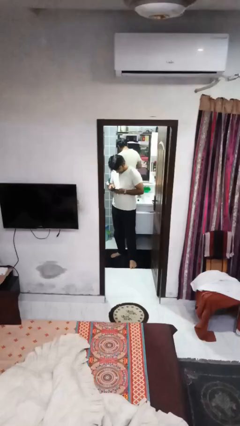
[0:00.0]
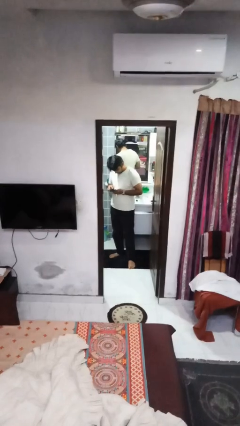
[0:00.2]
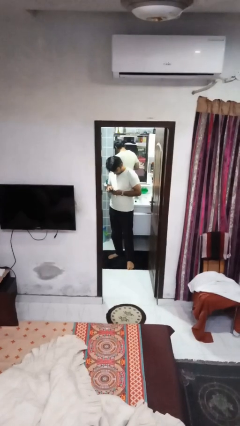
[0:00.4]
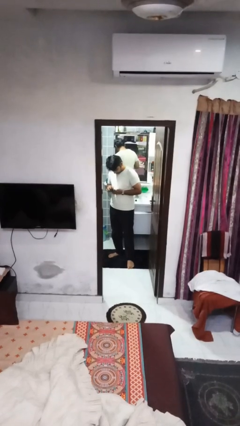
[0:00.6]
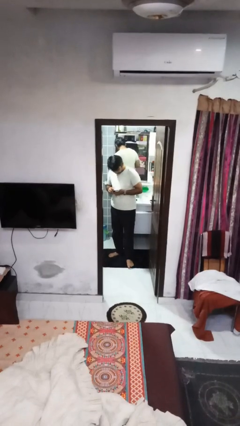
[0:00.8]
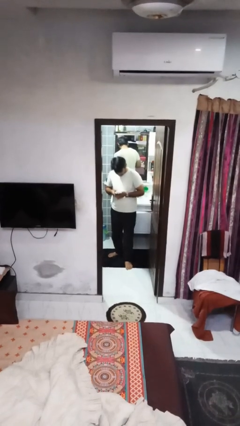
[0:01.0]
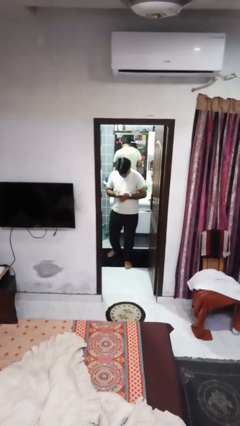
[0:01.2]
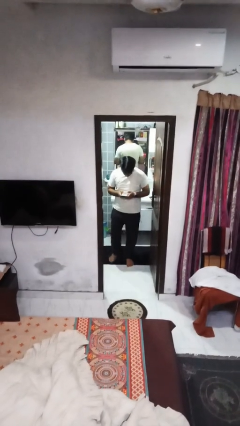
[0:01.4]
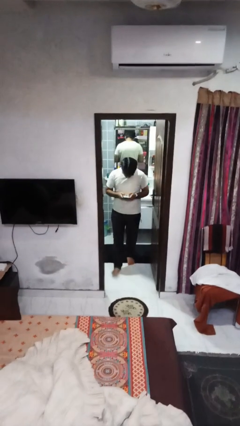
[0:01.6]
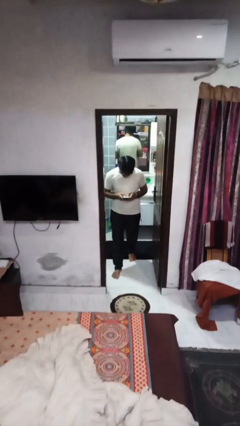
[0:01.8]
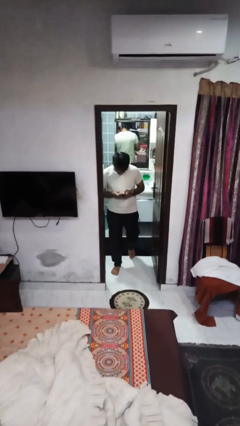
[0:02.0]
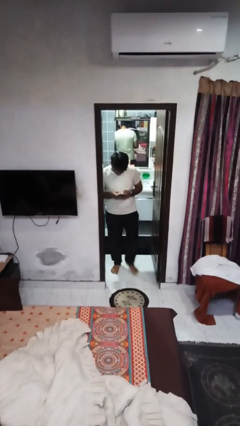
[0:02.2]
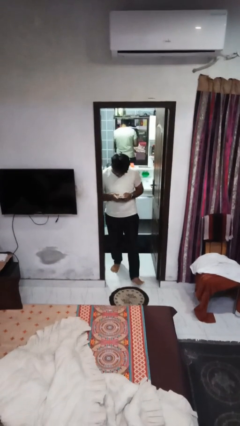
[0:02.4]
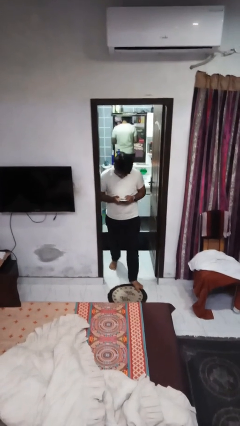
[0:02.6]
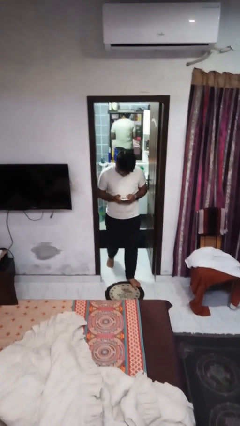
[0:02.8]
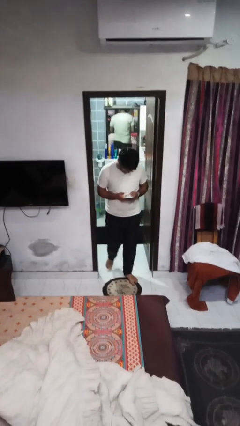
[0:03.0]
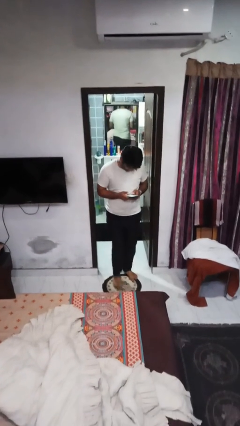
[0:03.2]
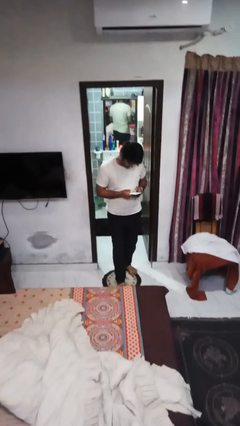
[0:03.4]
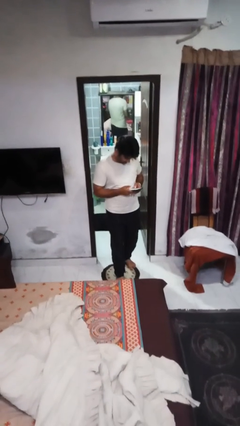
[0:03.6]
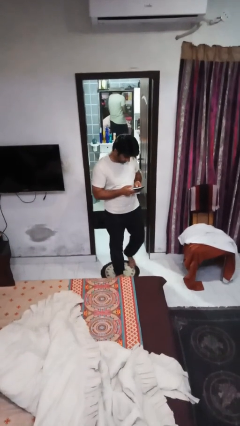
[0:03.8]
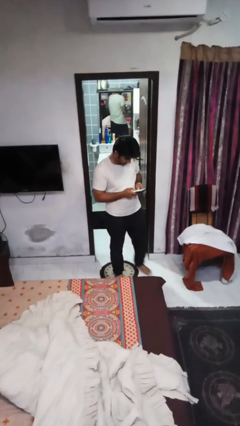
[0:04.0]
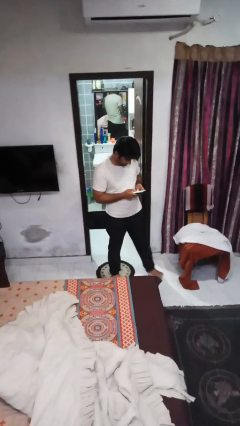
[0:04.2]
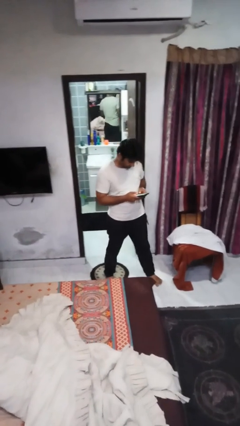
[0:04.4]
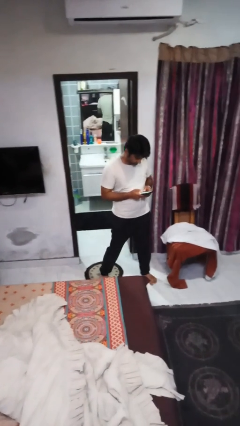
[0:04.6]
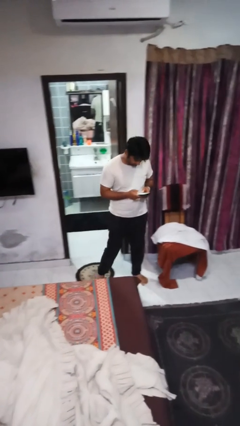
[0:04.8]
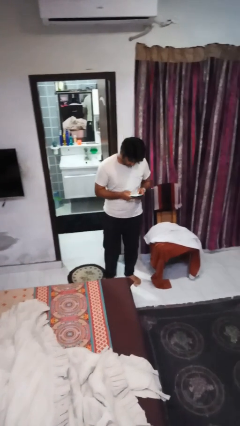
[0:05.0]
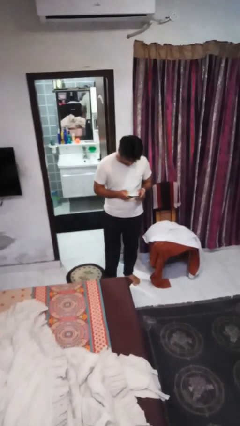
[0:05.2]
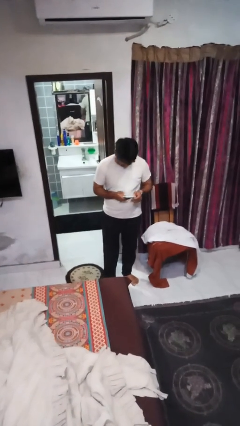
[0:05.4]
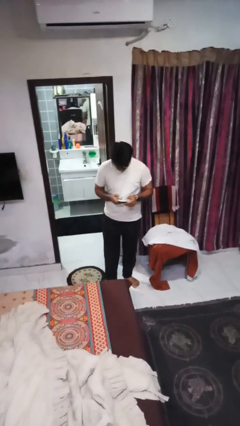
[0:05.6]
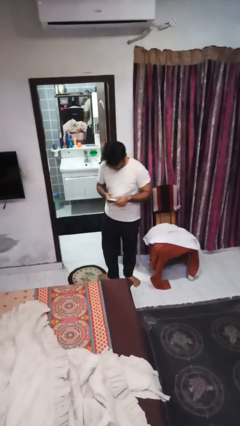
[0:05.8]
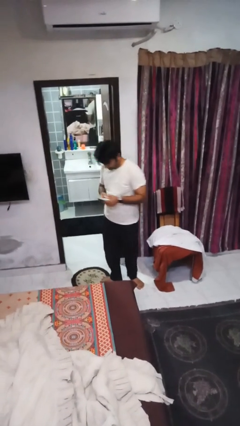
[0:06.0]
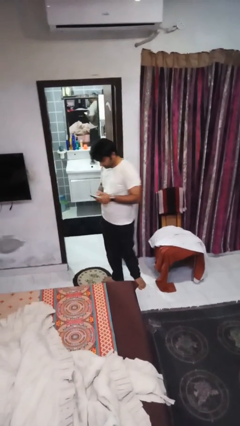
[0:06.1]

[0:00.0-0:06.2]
person enters scene through structure

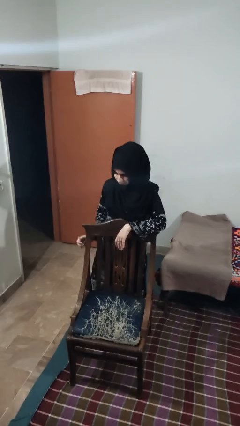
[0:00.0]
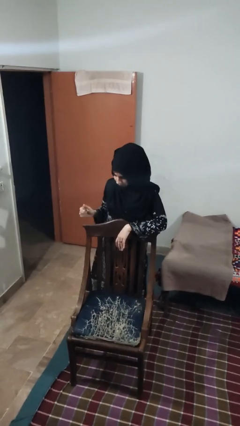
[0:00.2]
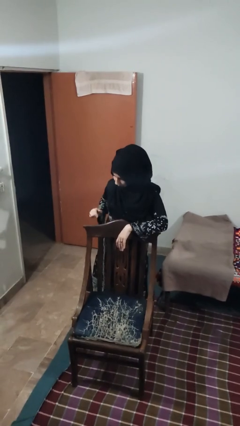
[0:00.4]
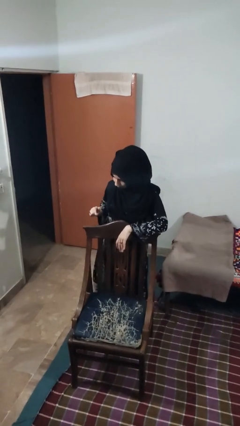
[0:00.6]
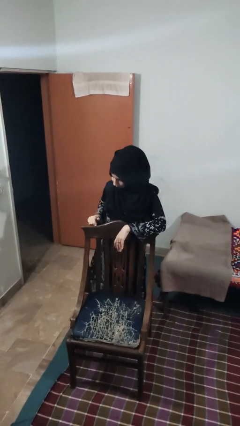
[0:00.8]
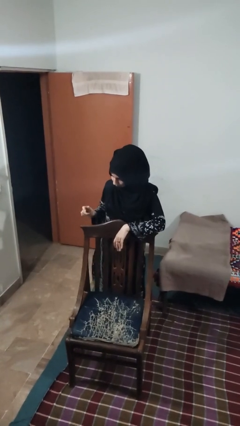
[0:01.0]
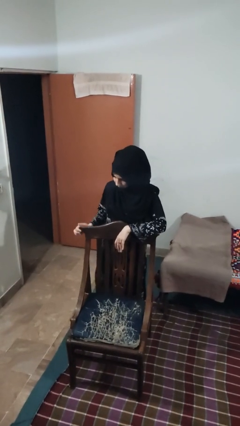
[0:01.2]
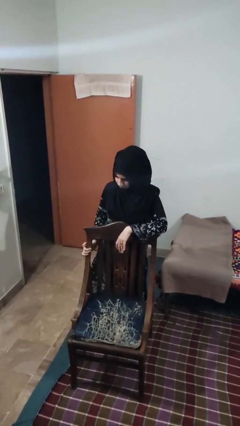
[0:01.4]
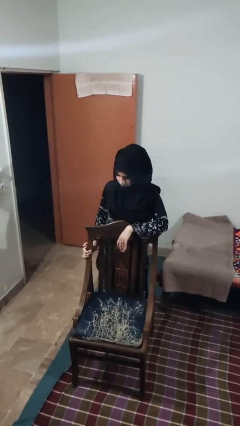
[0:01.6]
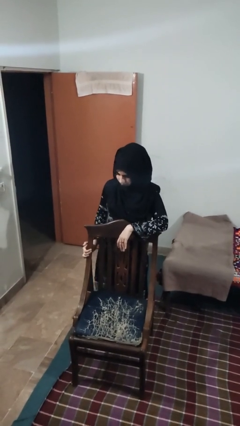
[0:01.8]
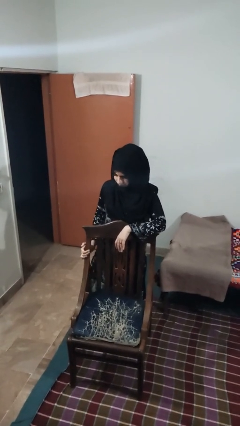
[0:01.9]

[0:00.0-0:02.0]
person taps object with finger

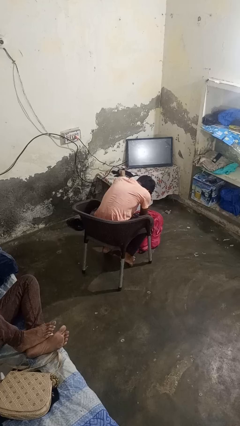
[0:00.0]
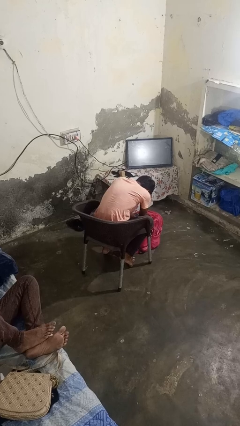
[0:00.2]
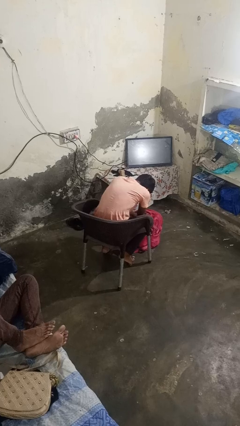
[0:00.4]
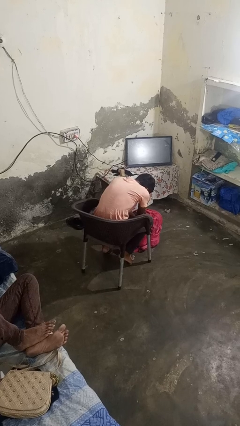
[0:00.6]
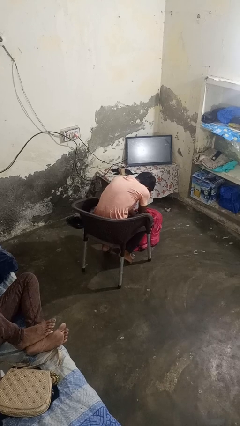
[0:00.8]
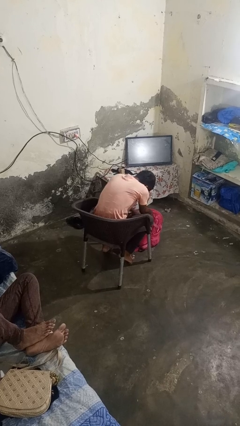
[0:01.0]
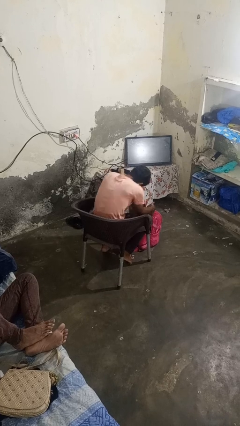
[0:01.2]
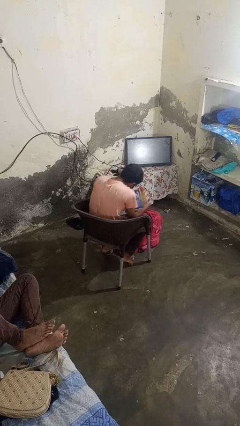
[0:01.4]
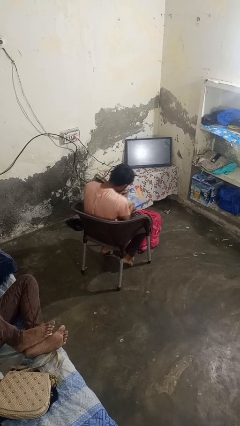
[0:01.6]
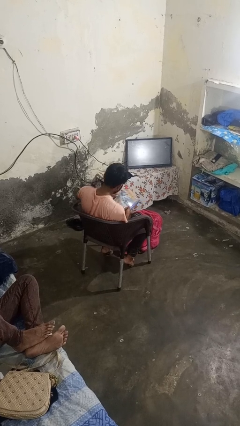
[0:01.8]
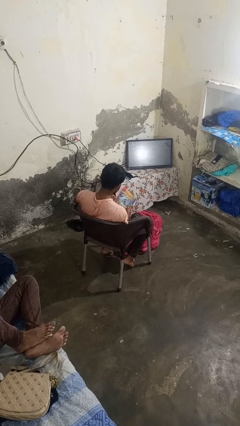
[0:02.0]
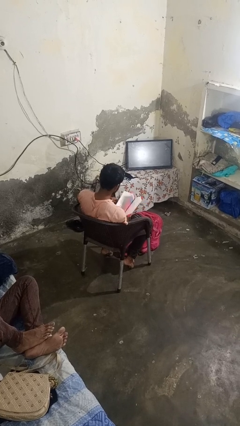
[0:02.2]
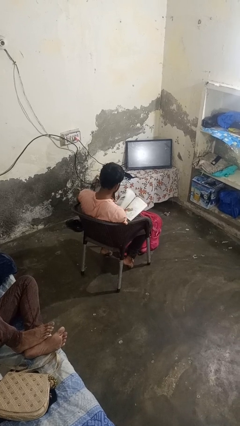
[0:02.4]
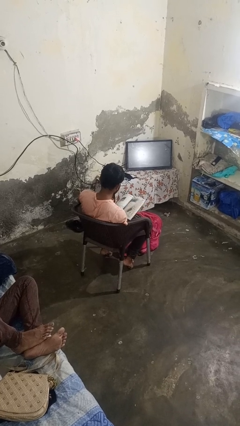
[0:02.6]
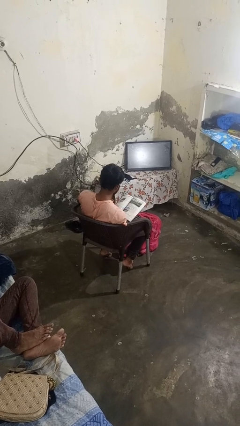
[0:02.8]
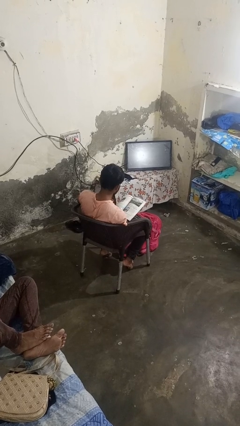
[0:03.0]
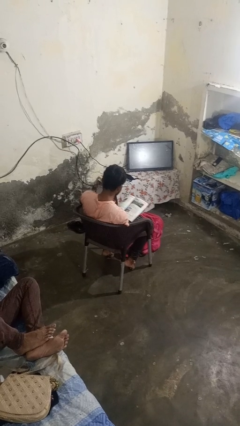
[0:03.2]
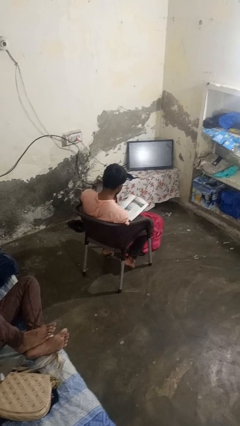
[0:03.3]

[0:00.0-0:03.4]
person takes object from backpack

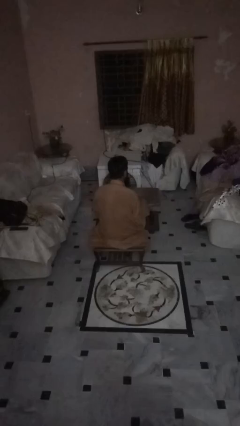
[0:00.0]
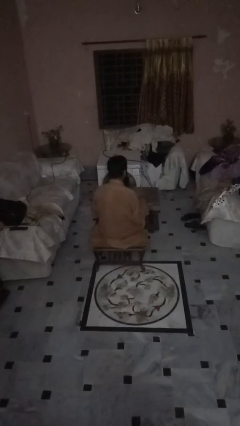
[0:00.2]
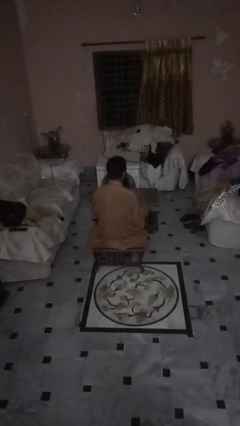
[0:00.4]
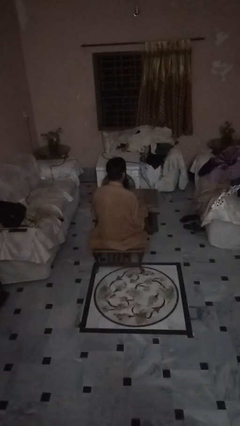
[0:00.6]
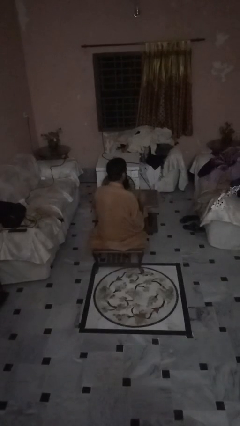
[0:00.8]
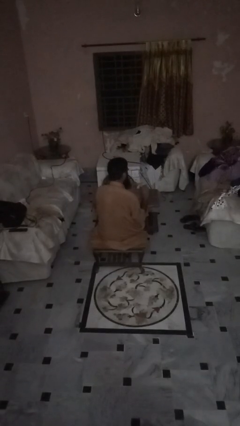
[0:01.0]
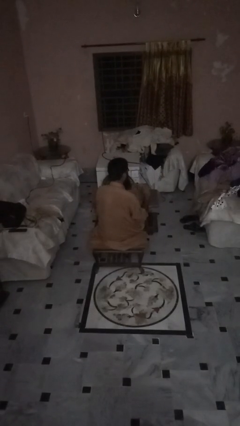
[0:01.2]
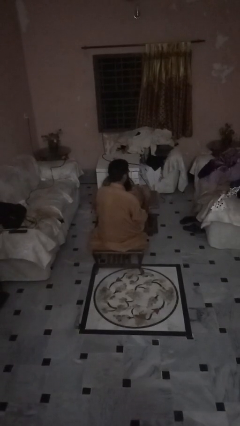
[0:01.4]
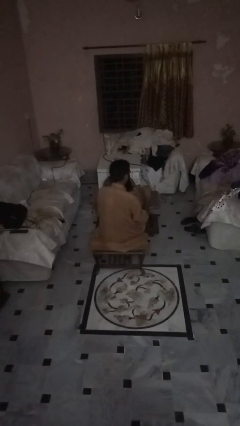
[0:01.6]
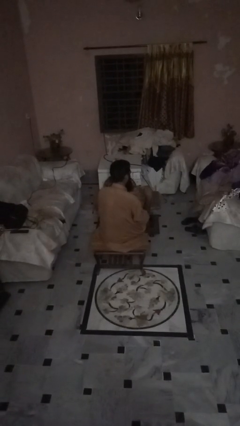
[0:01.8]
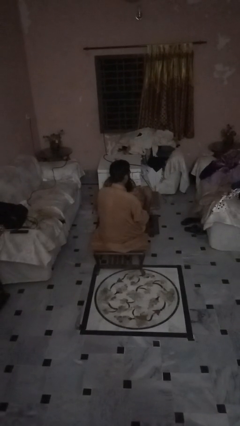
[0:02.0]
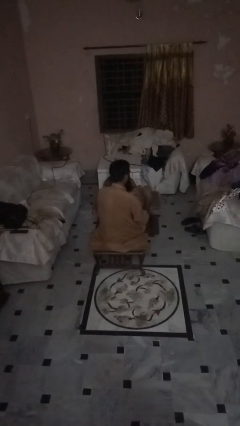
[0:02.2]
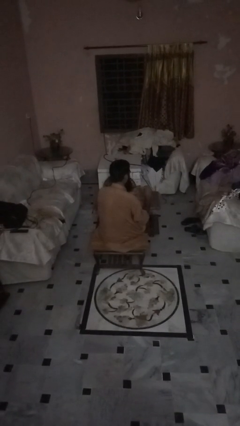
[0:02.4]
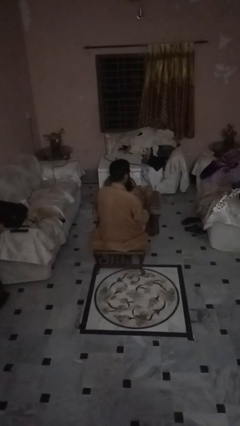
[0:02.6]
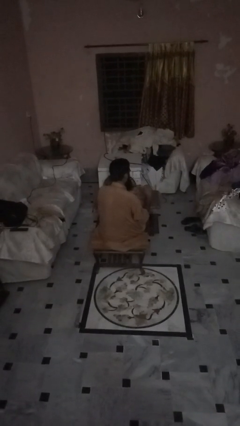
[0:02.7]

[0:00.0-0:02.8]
person files fingernails

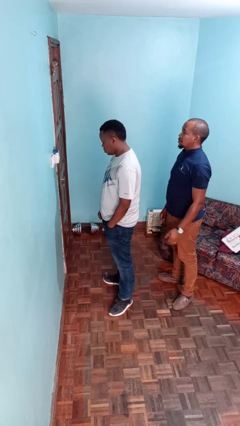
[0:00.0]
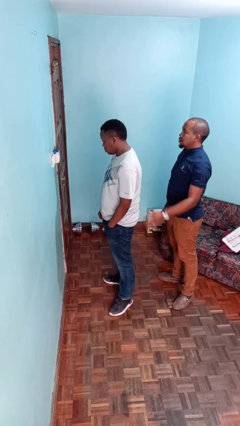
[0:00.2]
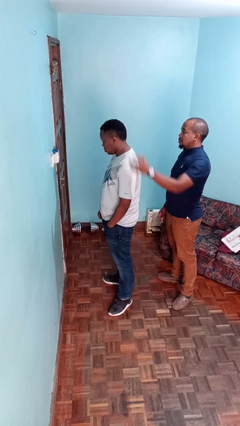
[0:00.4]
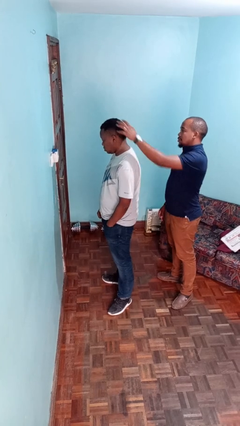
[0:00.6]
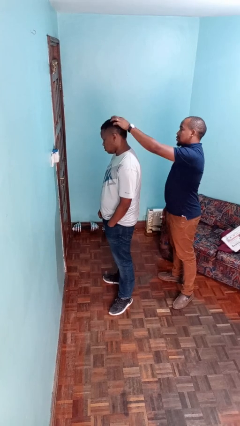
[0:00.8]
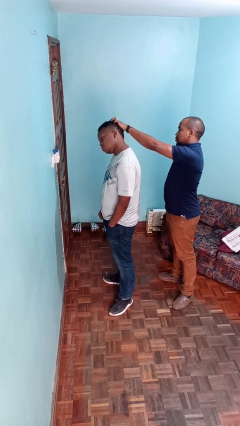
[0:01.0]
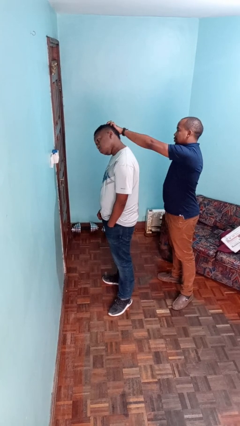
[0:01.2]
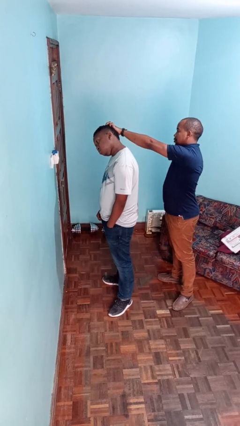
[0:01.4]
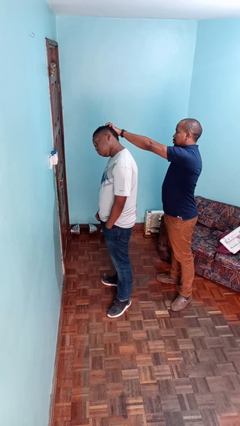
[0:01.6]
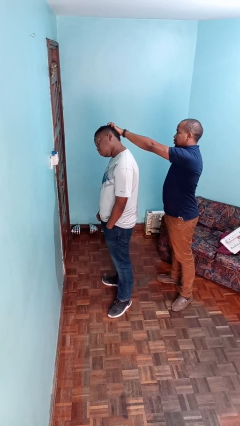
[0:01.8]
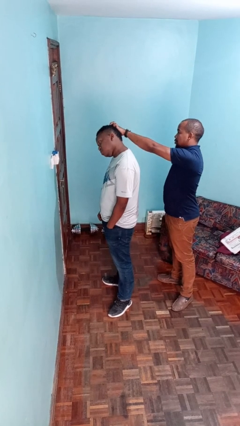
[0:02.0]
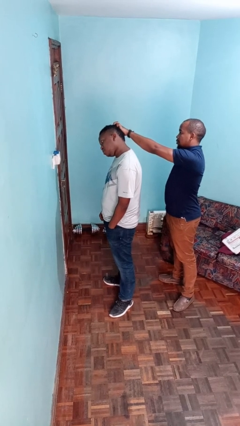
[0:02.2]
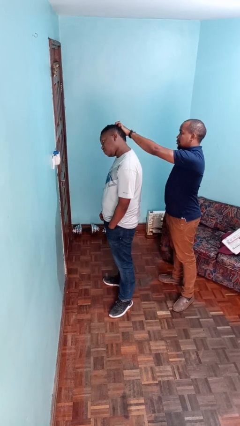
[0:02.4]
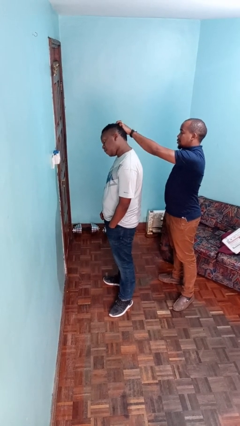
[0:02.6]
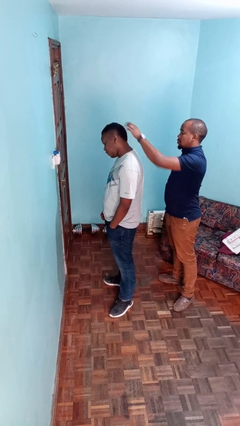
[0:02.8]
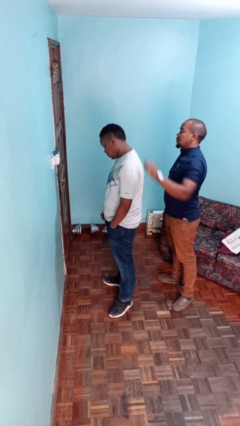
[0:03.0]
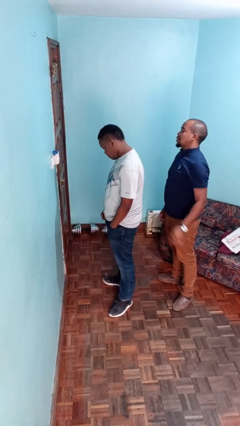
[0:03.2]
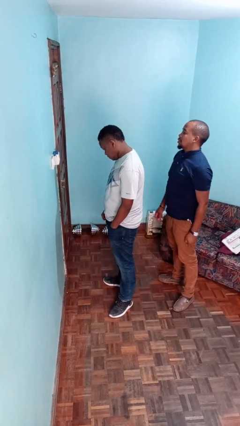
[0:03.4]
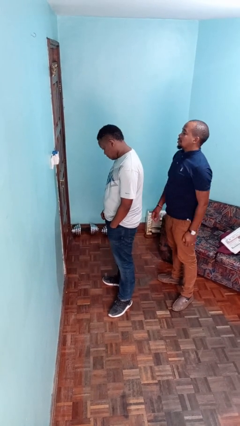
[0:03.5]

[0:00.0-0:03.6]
person grabs person by hair
